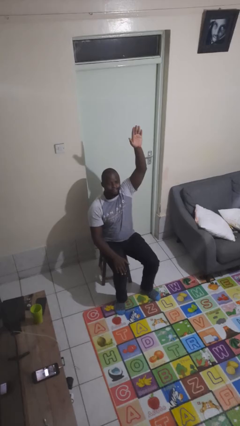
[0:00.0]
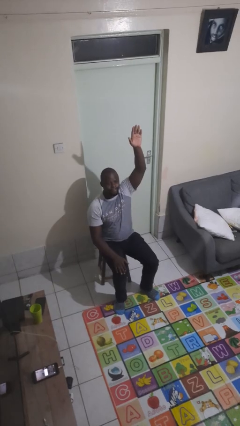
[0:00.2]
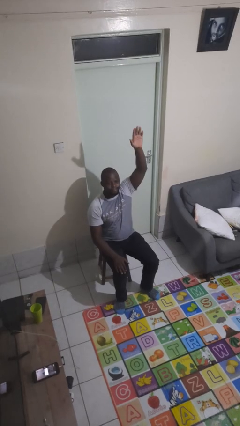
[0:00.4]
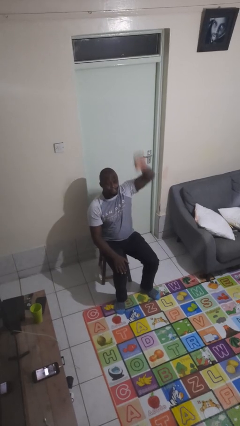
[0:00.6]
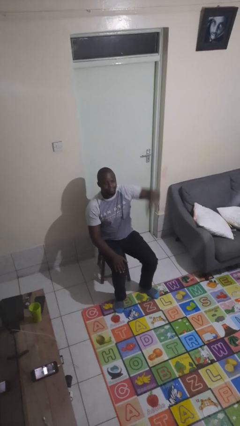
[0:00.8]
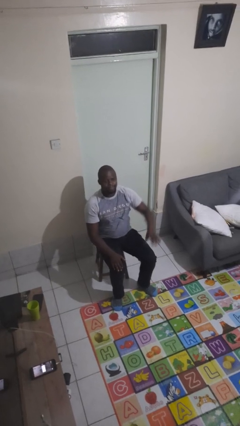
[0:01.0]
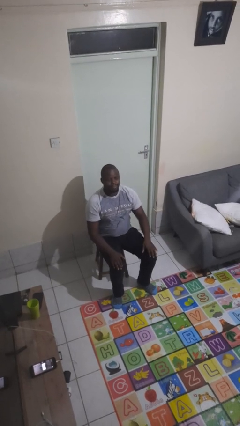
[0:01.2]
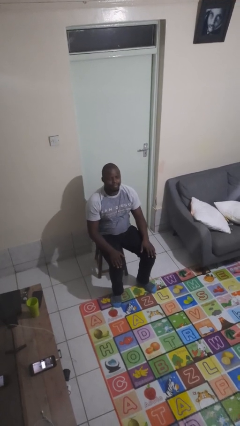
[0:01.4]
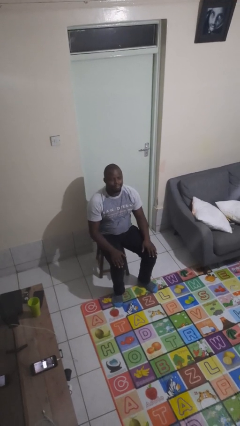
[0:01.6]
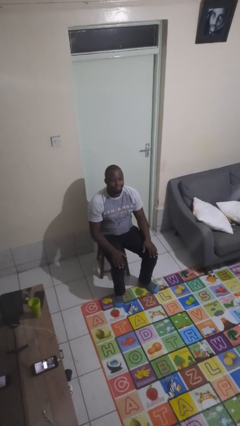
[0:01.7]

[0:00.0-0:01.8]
person gestures lower hand

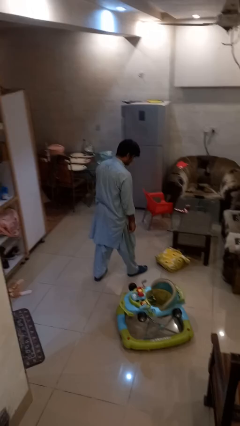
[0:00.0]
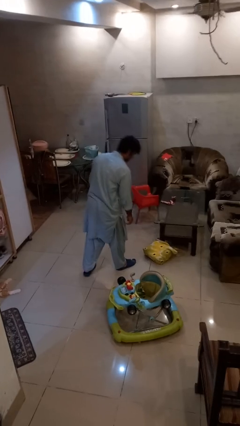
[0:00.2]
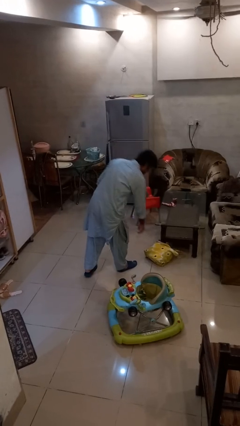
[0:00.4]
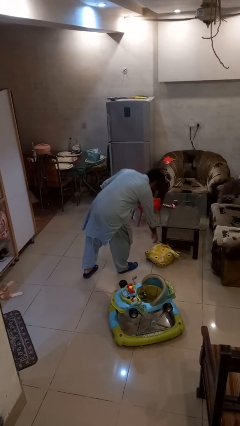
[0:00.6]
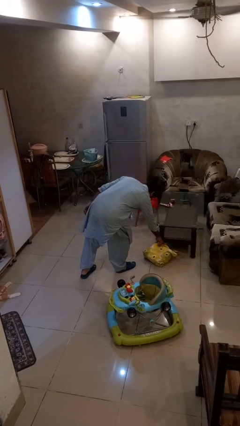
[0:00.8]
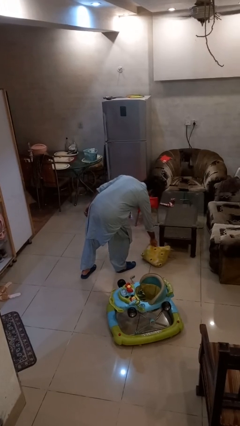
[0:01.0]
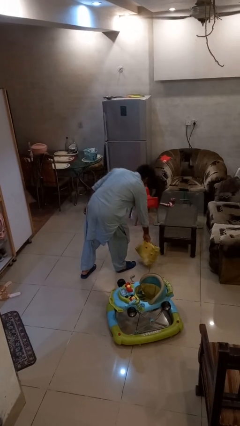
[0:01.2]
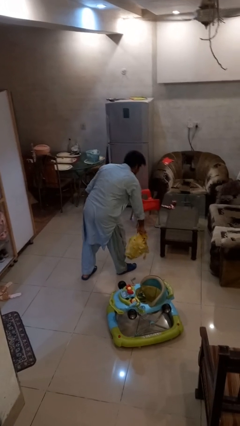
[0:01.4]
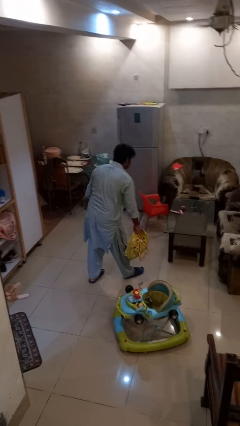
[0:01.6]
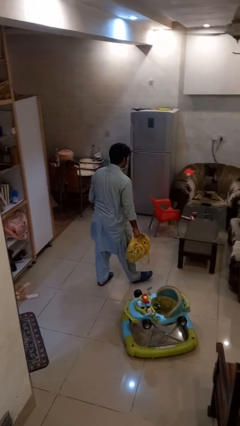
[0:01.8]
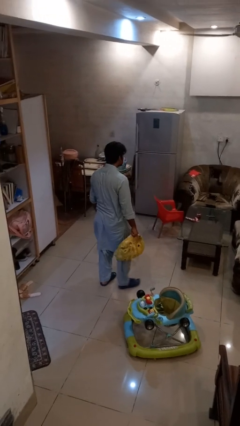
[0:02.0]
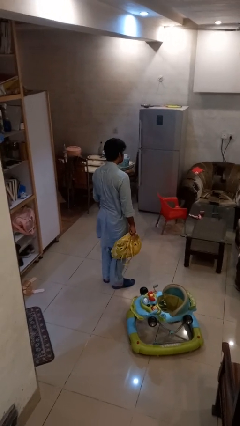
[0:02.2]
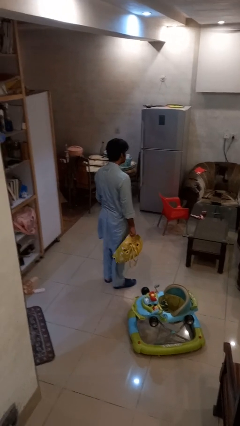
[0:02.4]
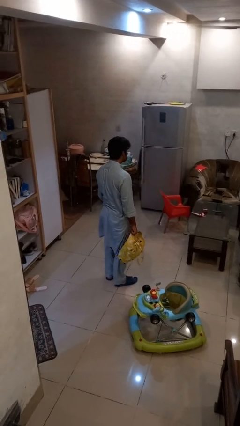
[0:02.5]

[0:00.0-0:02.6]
person picks up object from floor

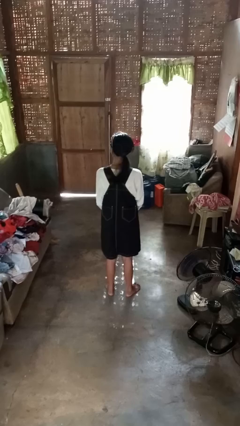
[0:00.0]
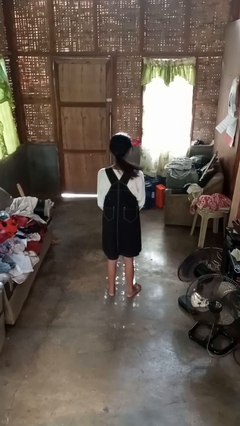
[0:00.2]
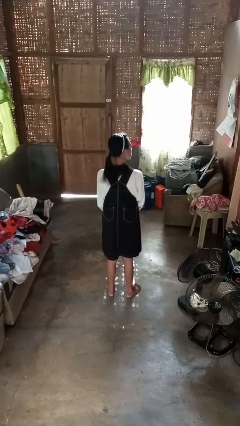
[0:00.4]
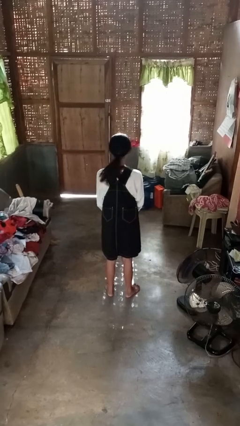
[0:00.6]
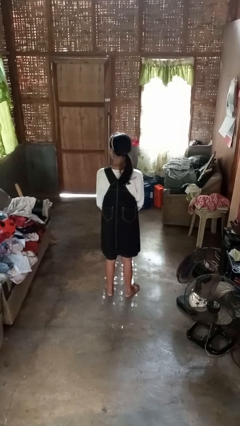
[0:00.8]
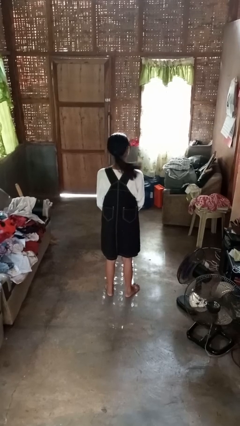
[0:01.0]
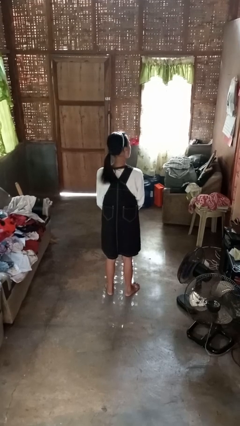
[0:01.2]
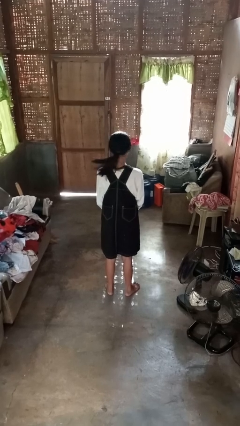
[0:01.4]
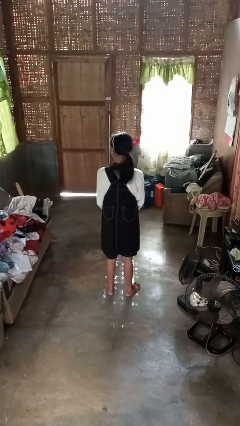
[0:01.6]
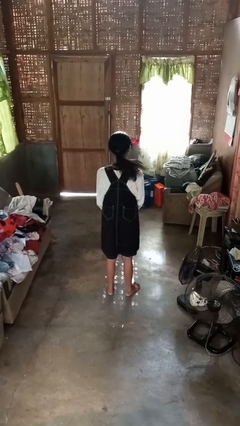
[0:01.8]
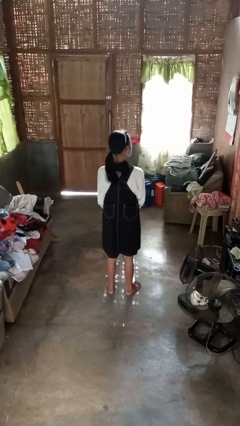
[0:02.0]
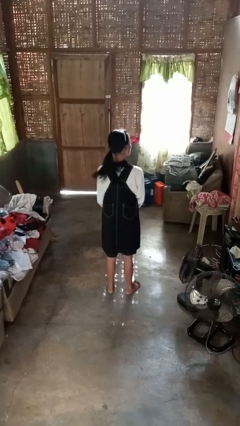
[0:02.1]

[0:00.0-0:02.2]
person shakes head

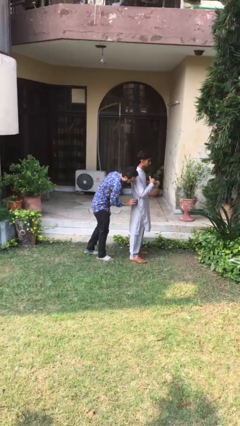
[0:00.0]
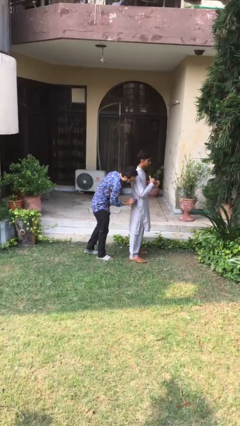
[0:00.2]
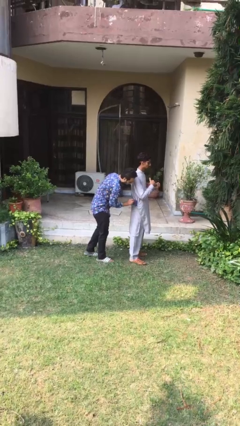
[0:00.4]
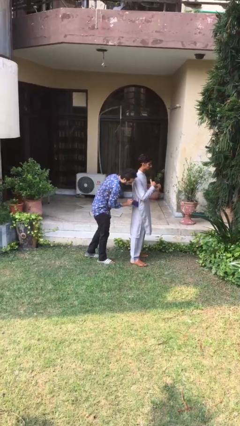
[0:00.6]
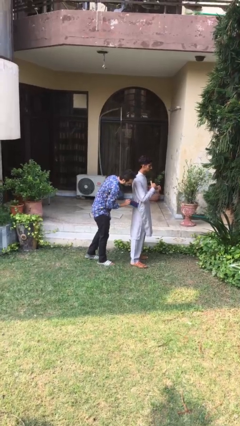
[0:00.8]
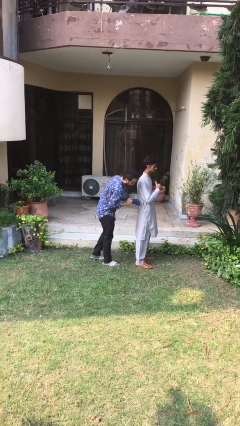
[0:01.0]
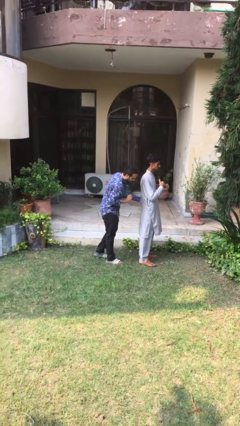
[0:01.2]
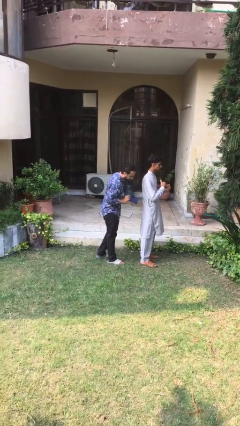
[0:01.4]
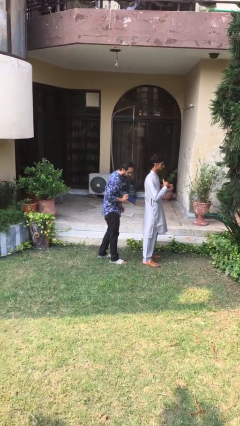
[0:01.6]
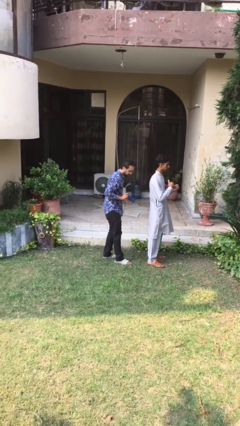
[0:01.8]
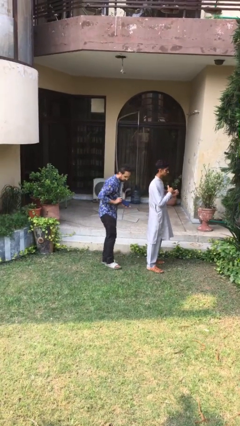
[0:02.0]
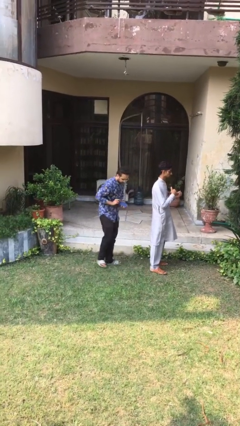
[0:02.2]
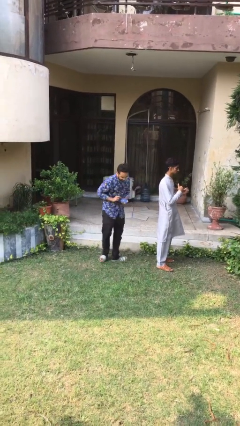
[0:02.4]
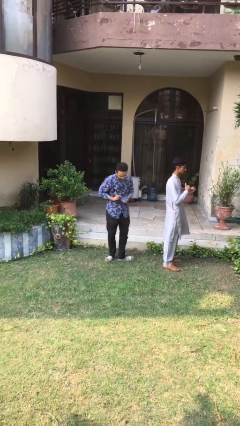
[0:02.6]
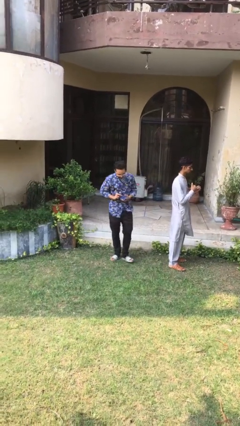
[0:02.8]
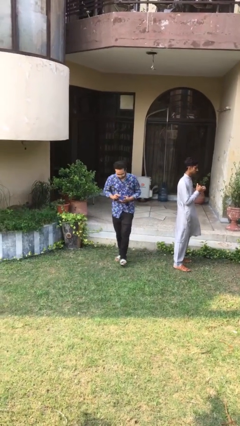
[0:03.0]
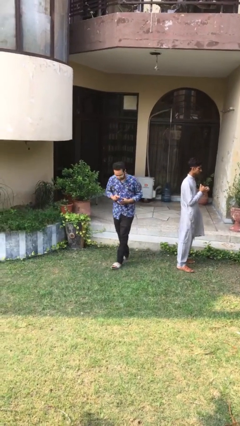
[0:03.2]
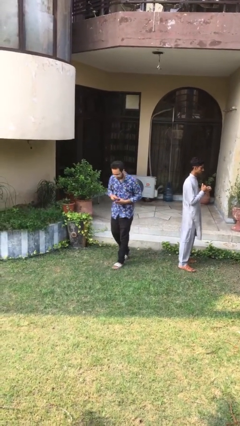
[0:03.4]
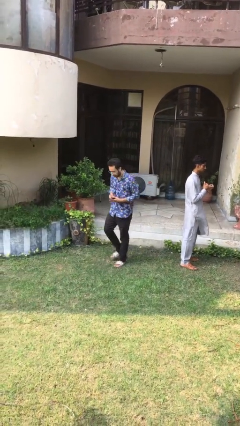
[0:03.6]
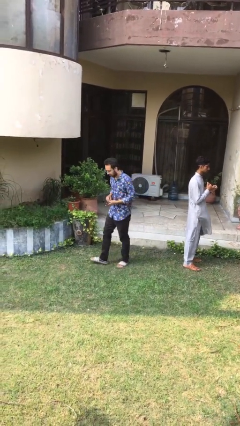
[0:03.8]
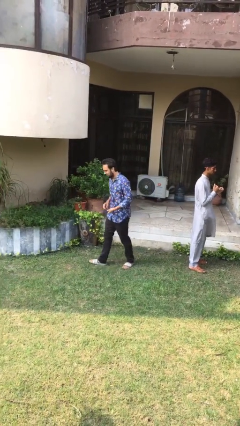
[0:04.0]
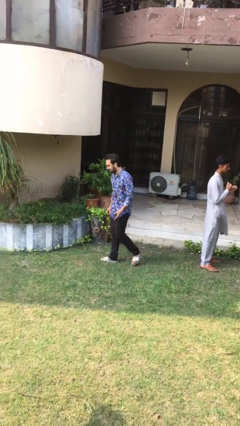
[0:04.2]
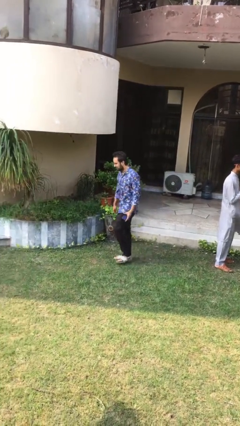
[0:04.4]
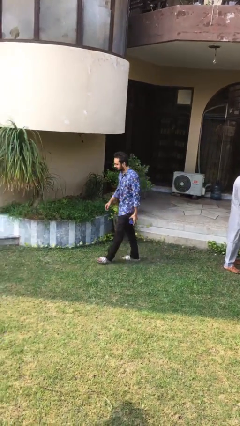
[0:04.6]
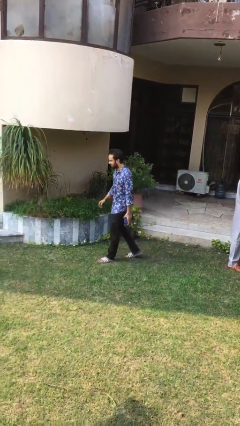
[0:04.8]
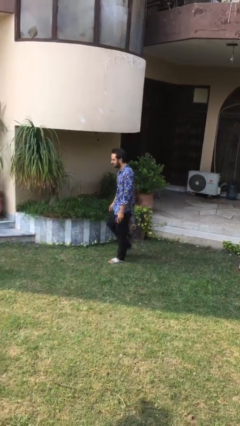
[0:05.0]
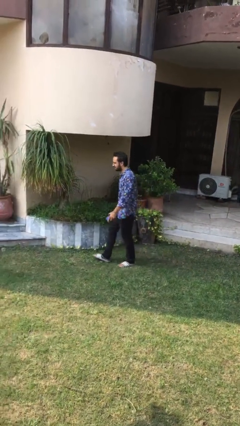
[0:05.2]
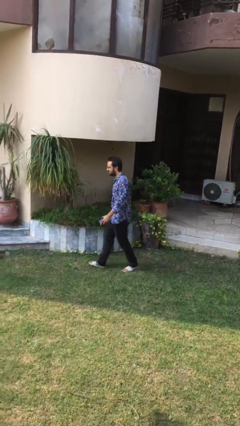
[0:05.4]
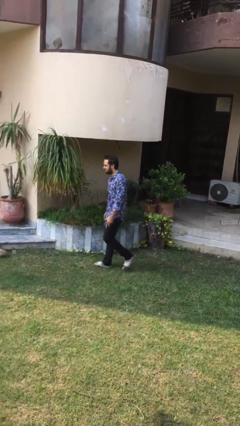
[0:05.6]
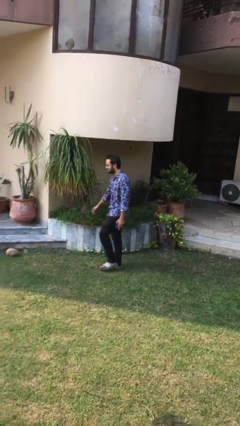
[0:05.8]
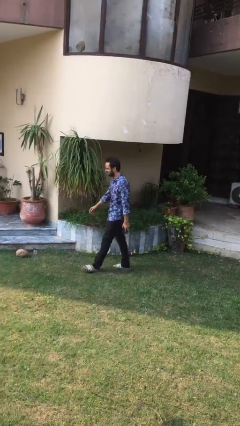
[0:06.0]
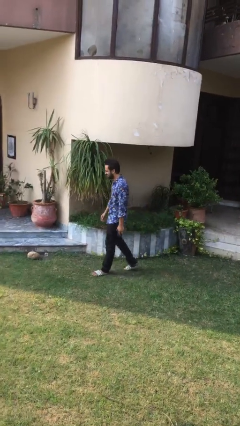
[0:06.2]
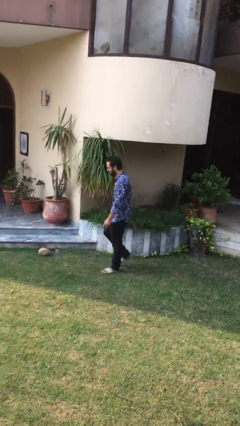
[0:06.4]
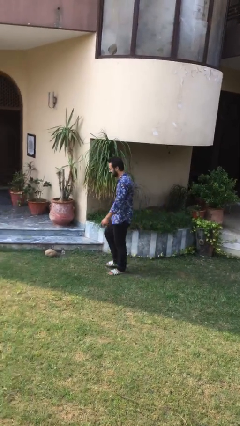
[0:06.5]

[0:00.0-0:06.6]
person steals object from person

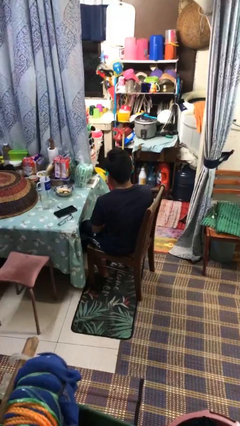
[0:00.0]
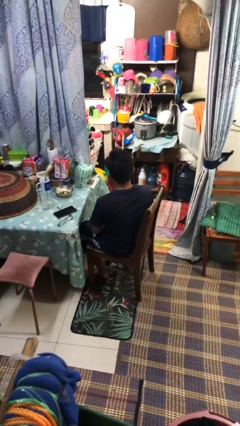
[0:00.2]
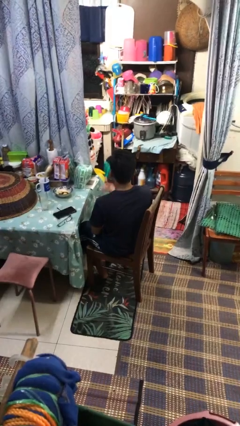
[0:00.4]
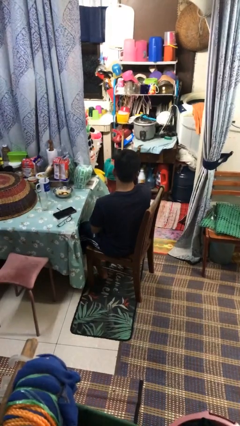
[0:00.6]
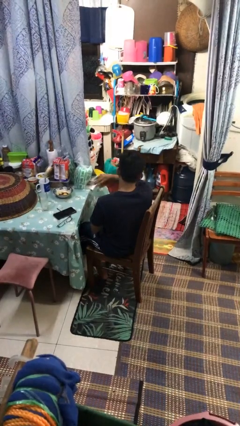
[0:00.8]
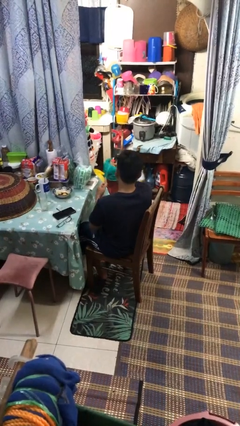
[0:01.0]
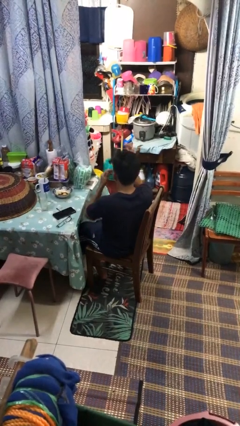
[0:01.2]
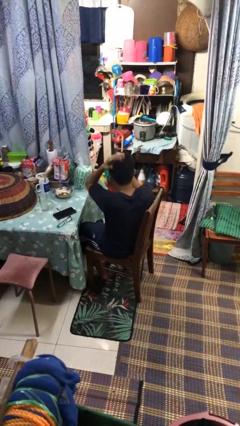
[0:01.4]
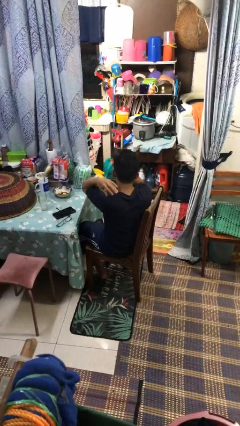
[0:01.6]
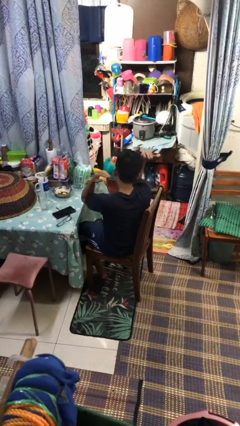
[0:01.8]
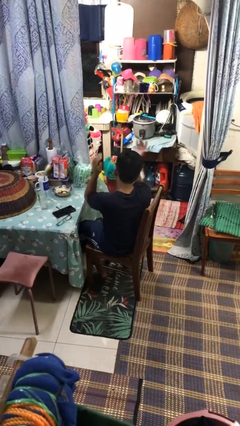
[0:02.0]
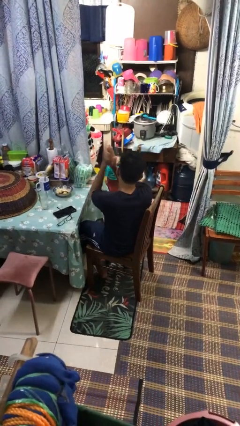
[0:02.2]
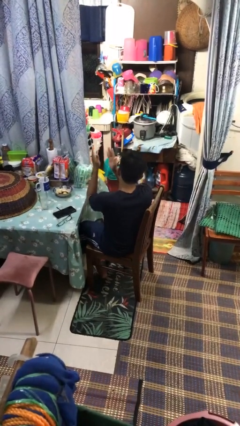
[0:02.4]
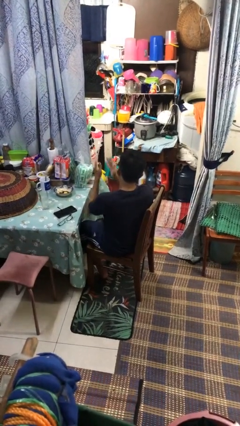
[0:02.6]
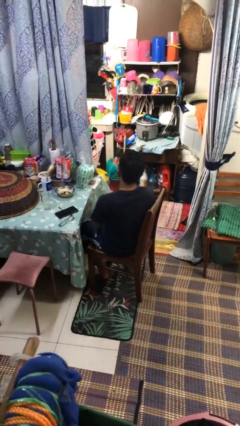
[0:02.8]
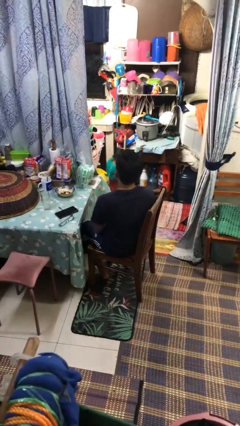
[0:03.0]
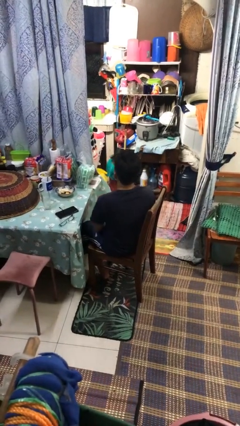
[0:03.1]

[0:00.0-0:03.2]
person swats bug

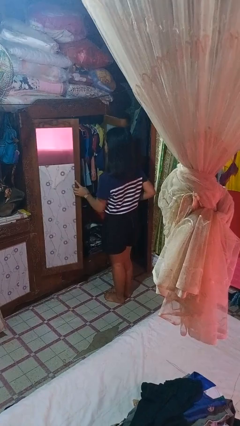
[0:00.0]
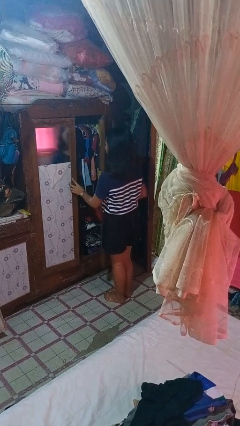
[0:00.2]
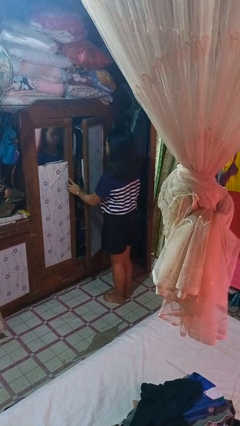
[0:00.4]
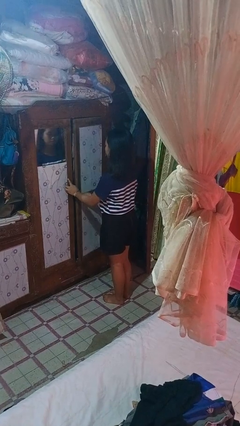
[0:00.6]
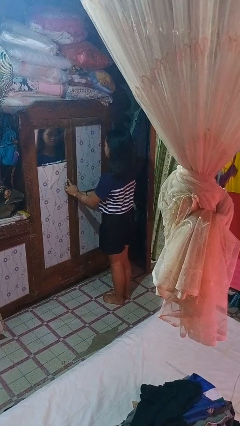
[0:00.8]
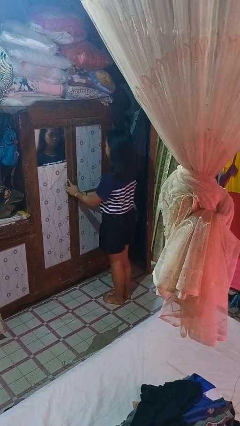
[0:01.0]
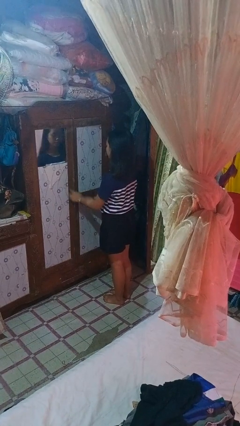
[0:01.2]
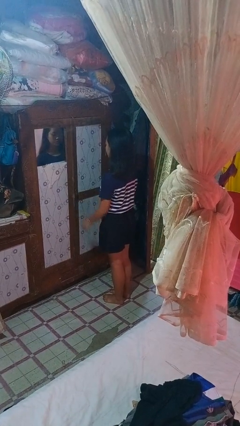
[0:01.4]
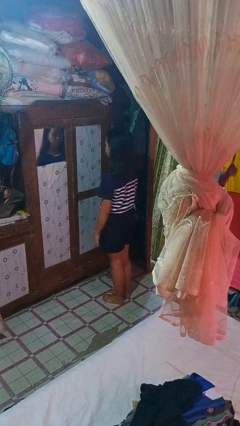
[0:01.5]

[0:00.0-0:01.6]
person closes closet door
